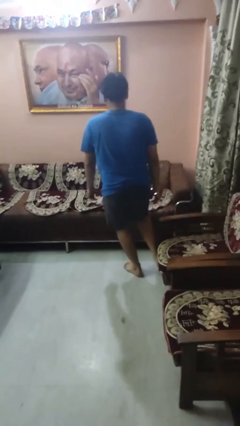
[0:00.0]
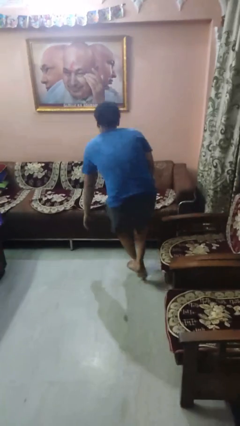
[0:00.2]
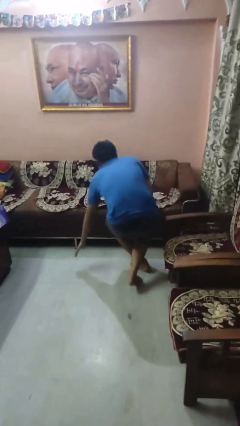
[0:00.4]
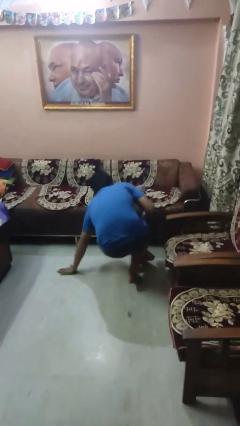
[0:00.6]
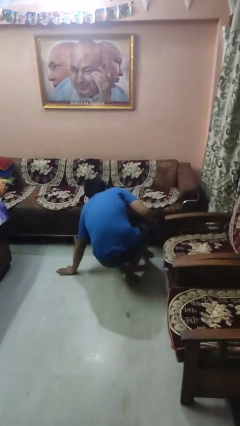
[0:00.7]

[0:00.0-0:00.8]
person trips on object on floor

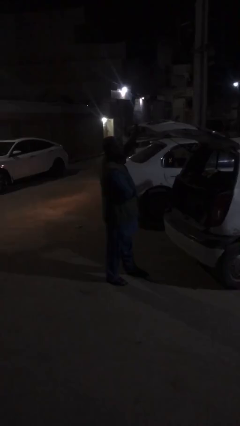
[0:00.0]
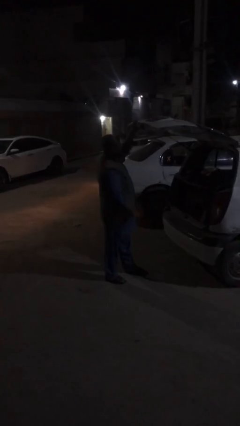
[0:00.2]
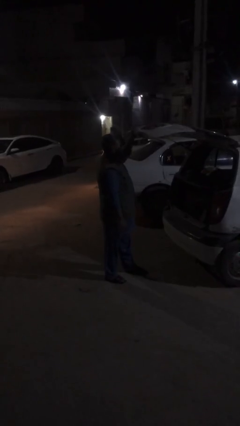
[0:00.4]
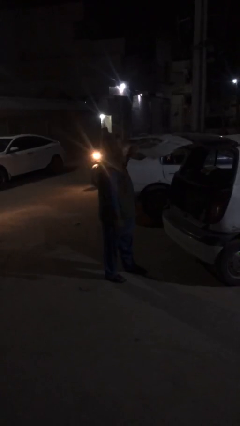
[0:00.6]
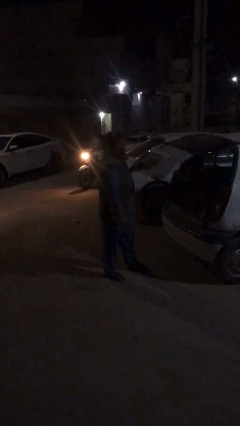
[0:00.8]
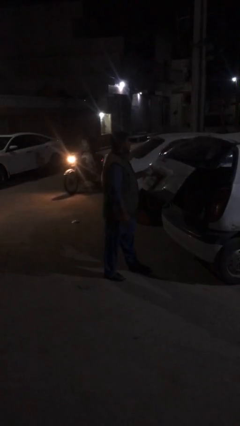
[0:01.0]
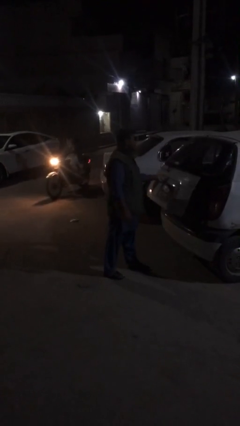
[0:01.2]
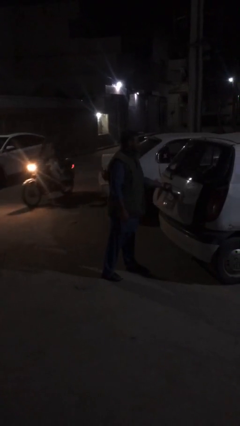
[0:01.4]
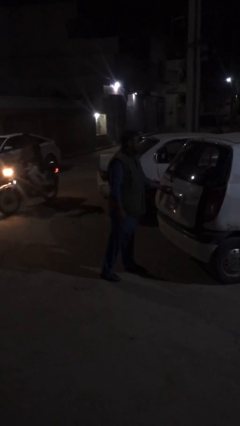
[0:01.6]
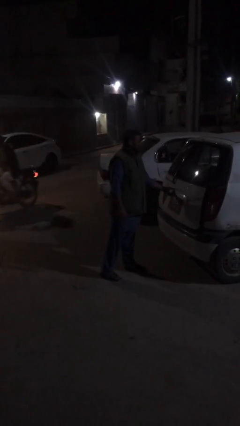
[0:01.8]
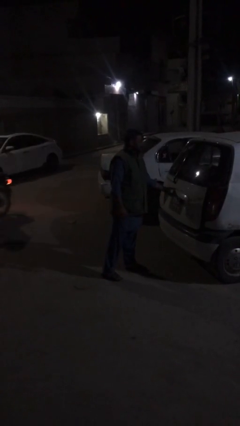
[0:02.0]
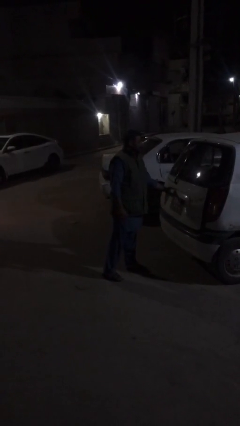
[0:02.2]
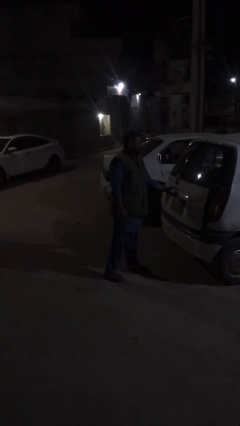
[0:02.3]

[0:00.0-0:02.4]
person closes car trunk

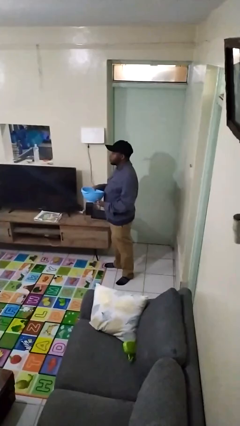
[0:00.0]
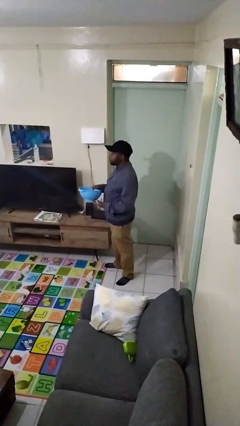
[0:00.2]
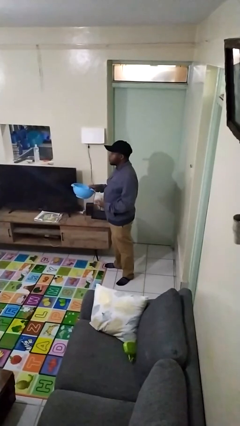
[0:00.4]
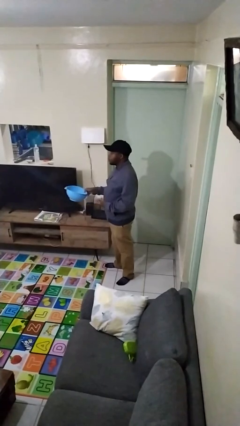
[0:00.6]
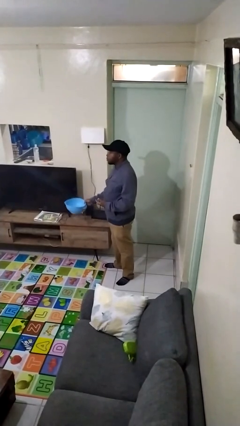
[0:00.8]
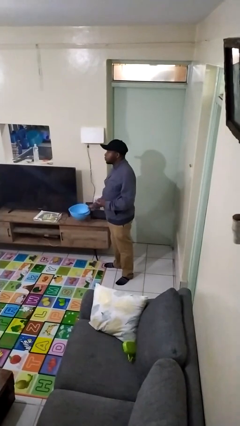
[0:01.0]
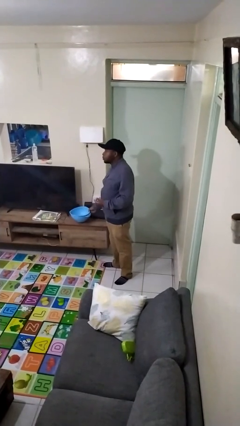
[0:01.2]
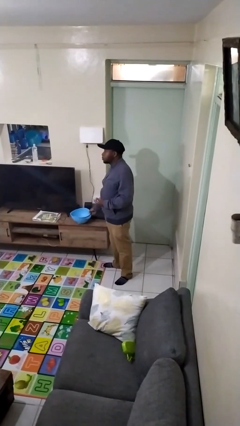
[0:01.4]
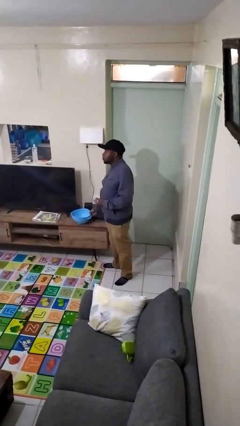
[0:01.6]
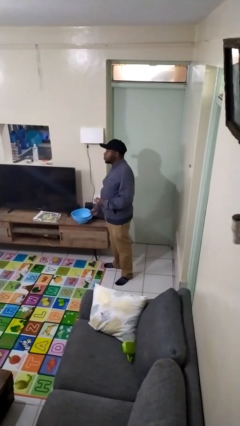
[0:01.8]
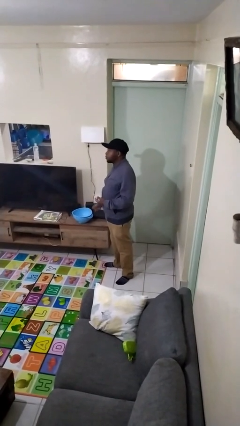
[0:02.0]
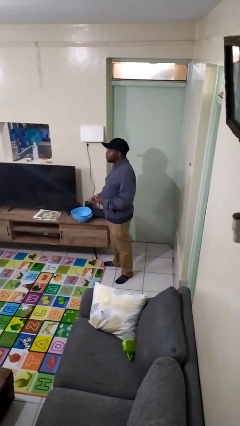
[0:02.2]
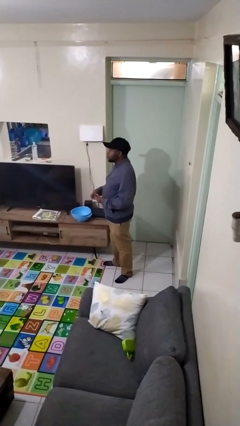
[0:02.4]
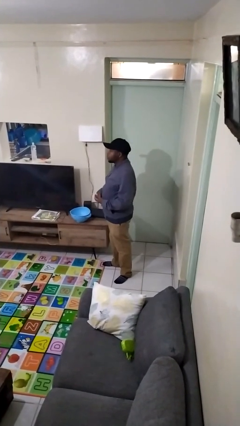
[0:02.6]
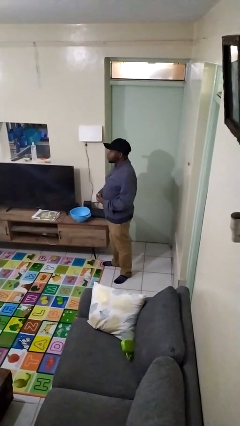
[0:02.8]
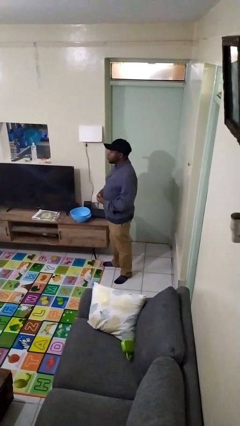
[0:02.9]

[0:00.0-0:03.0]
person puts down object on countertop

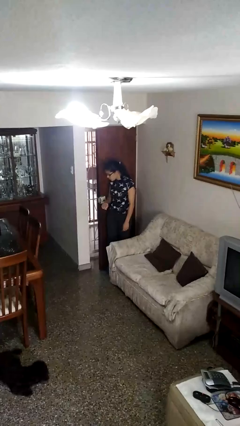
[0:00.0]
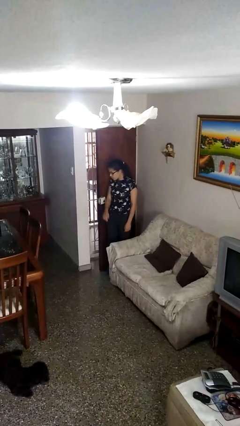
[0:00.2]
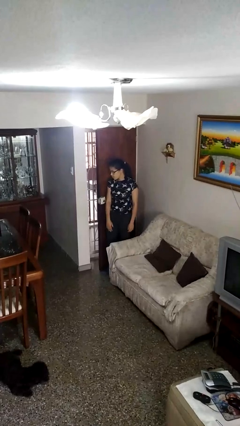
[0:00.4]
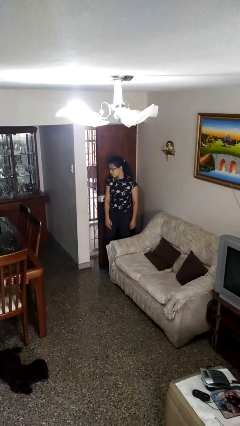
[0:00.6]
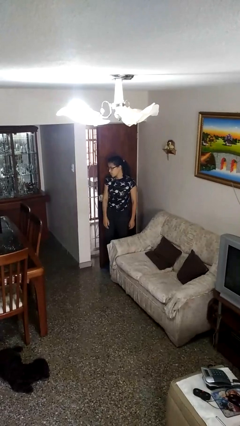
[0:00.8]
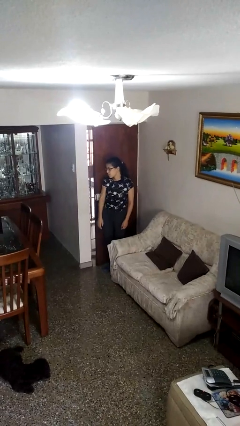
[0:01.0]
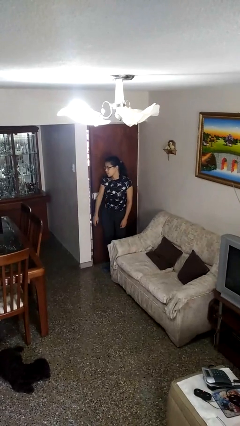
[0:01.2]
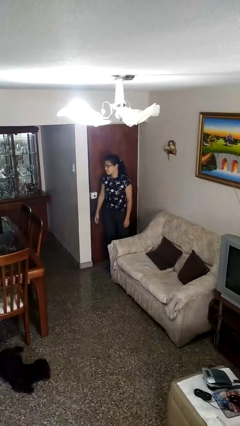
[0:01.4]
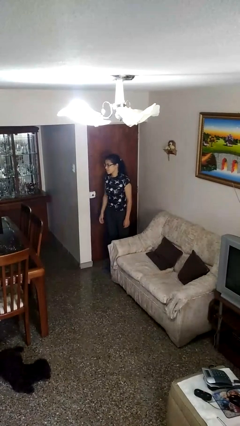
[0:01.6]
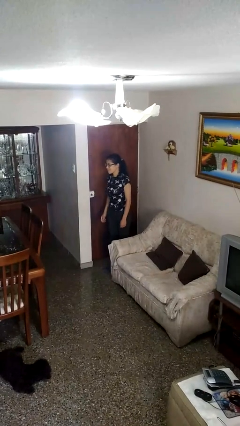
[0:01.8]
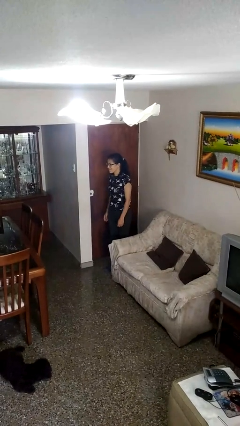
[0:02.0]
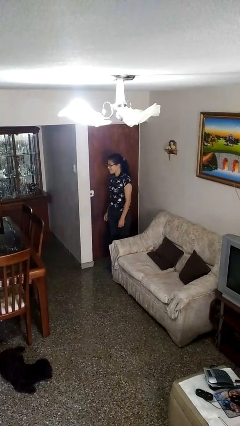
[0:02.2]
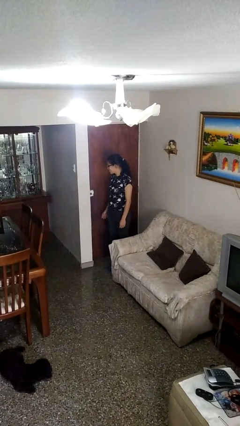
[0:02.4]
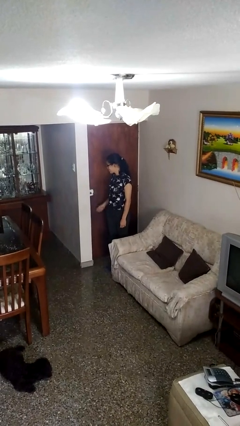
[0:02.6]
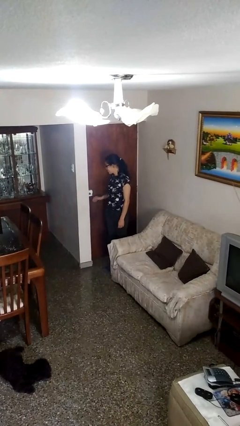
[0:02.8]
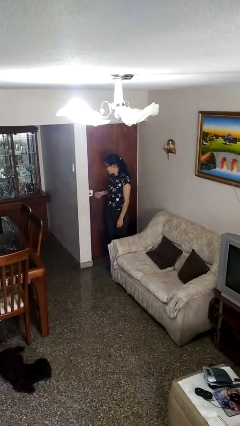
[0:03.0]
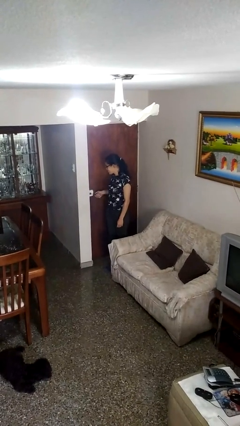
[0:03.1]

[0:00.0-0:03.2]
person closes door with hip

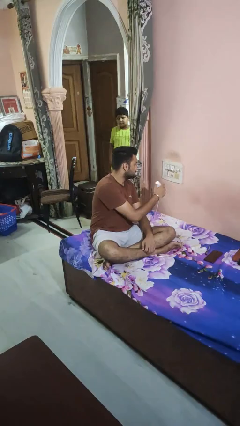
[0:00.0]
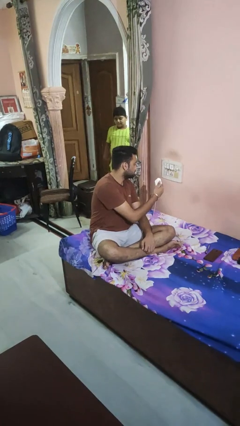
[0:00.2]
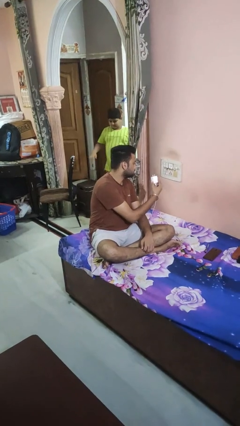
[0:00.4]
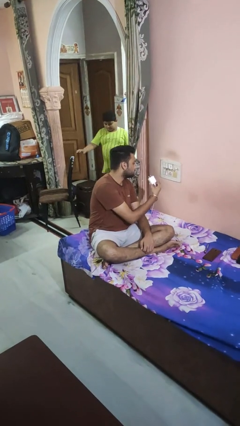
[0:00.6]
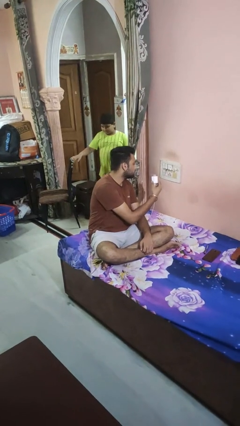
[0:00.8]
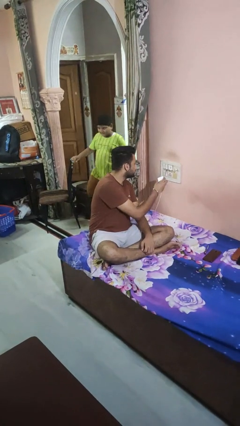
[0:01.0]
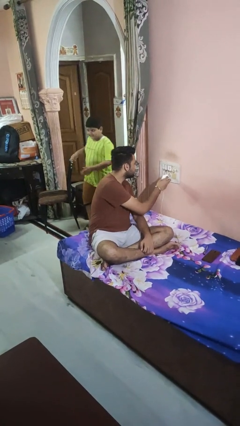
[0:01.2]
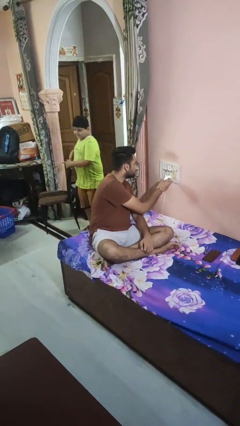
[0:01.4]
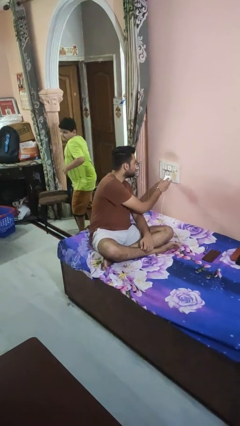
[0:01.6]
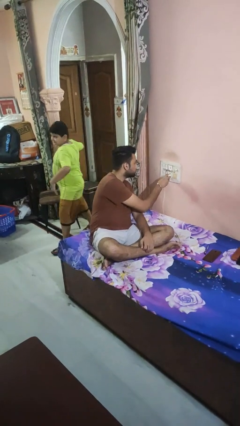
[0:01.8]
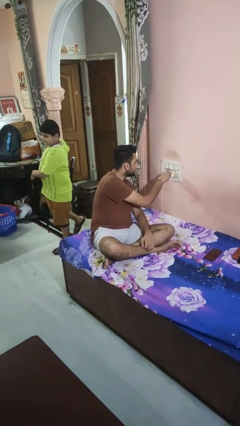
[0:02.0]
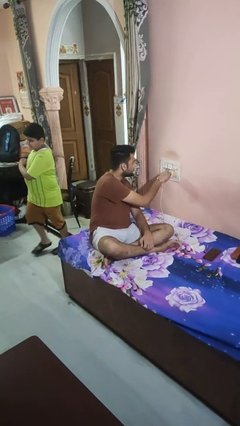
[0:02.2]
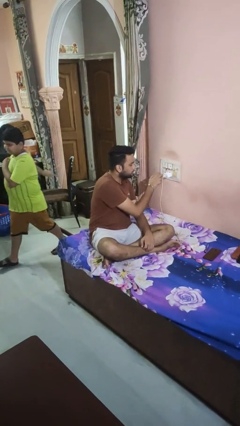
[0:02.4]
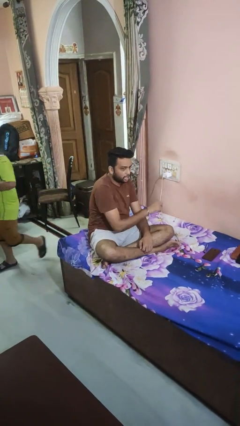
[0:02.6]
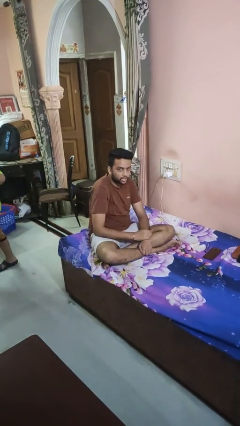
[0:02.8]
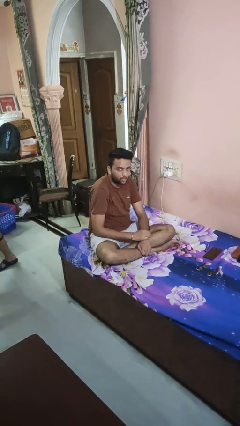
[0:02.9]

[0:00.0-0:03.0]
person plugs into electrical socket

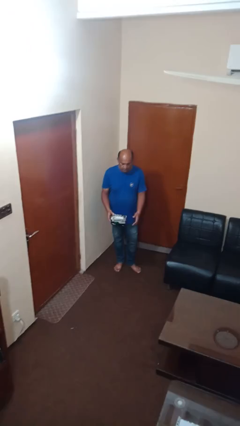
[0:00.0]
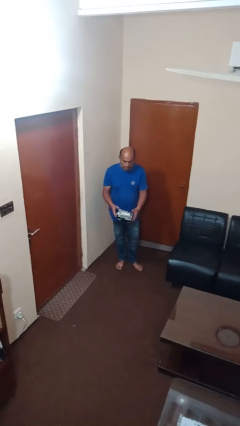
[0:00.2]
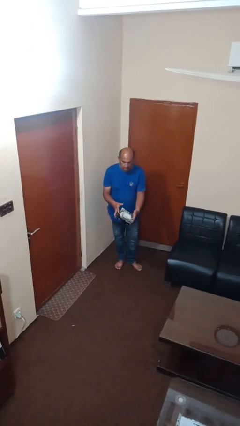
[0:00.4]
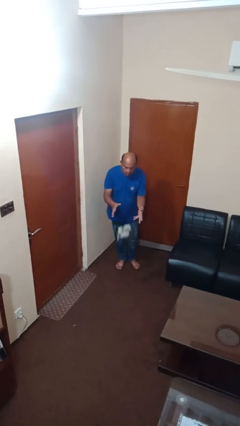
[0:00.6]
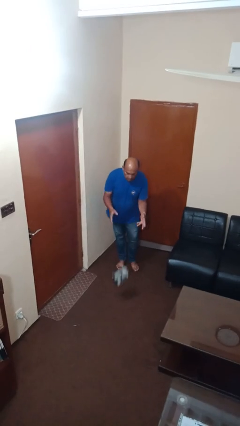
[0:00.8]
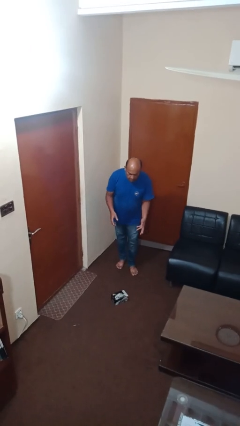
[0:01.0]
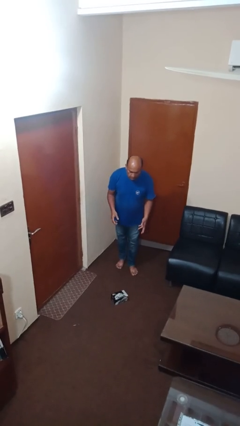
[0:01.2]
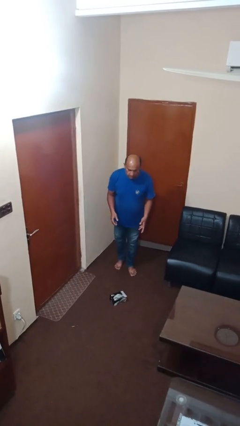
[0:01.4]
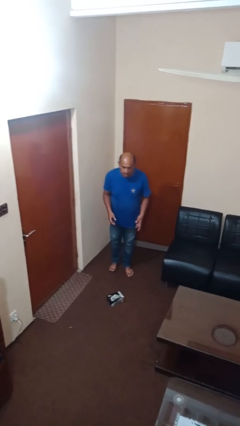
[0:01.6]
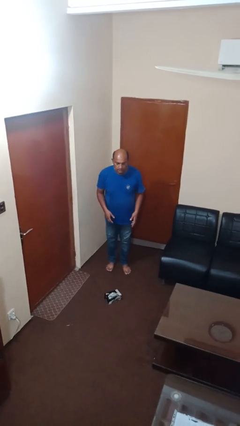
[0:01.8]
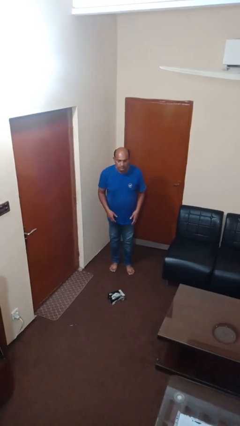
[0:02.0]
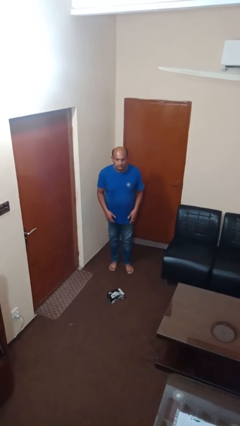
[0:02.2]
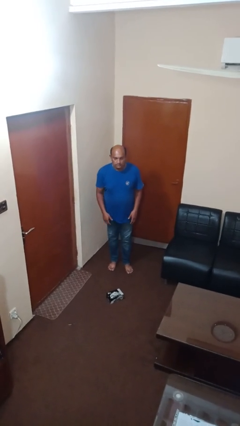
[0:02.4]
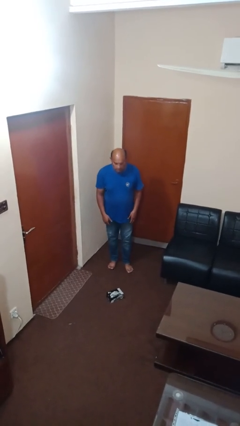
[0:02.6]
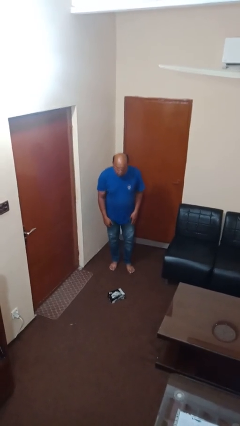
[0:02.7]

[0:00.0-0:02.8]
person drops object

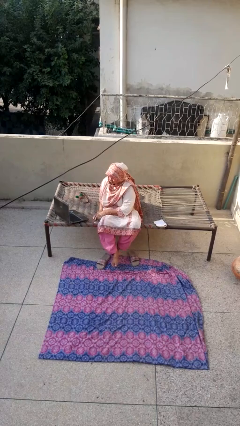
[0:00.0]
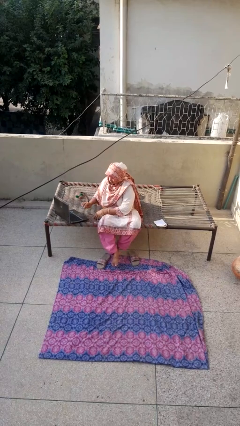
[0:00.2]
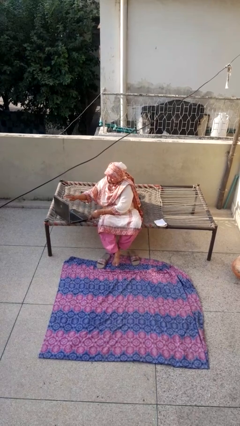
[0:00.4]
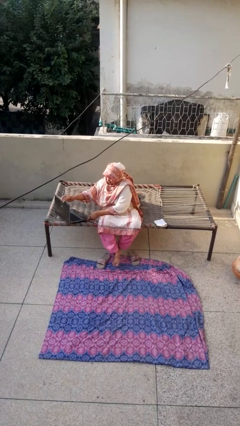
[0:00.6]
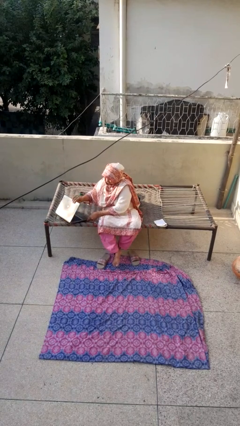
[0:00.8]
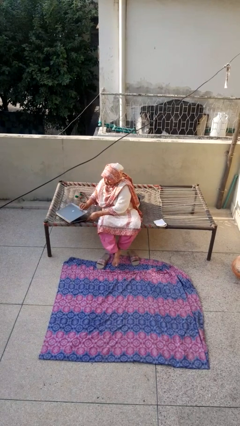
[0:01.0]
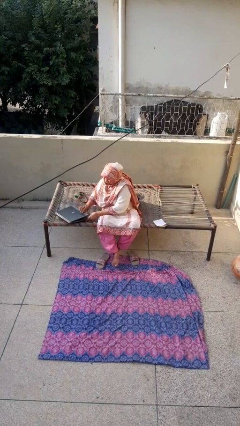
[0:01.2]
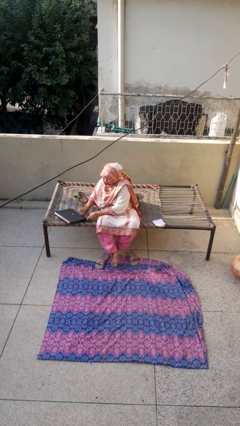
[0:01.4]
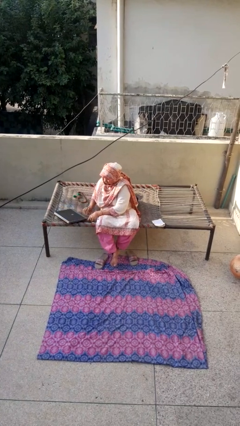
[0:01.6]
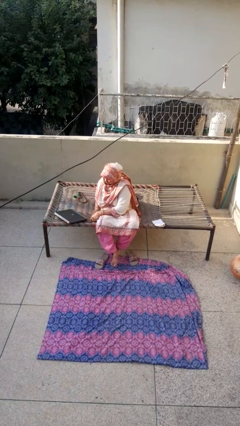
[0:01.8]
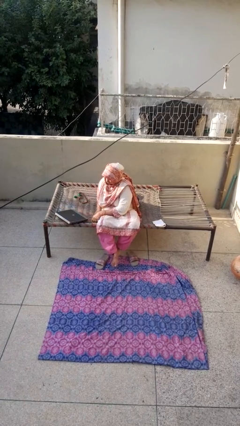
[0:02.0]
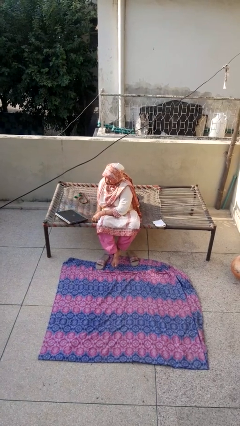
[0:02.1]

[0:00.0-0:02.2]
person closes laptop
